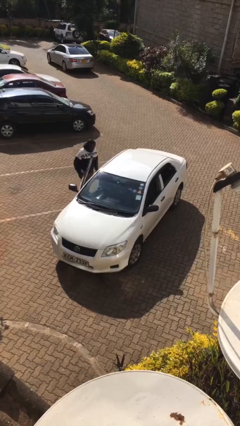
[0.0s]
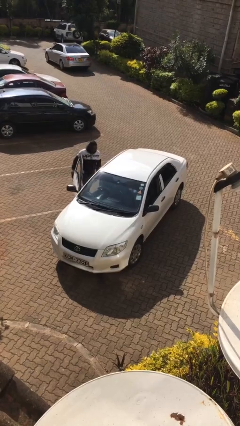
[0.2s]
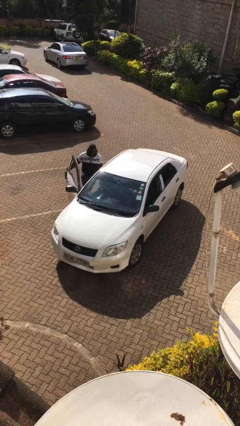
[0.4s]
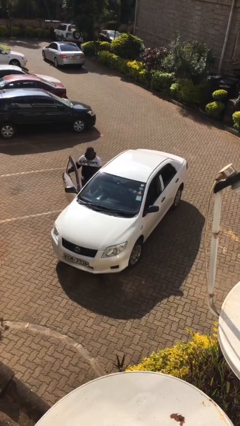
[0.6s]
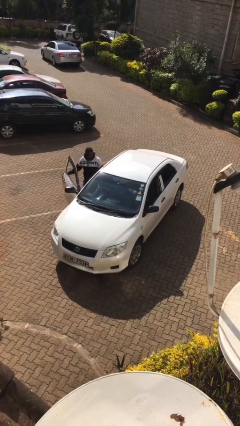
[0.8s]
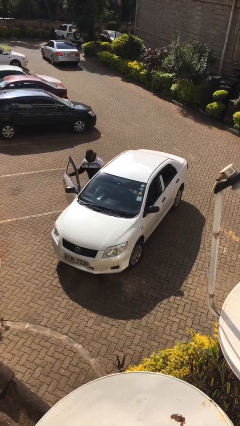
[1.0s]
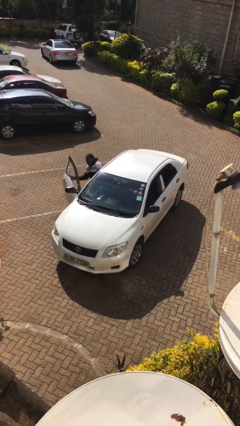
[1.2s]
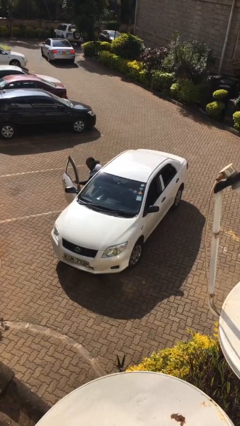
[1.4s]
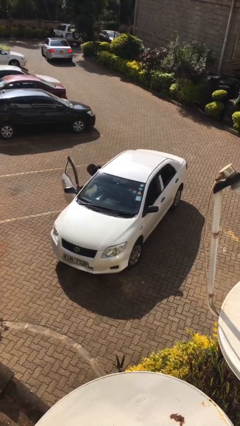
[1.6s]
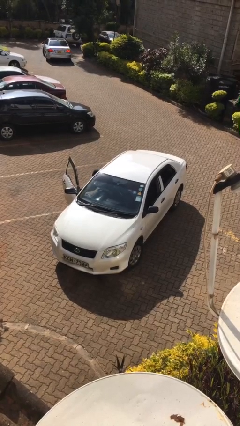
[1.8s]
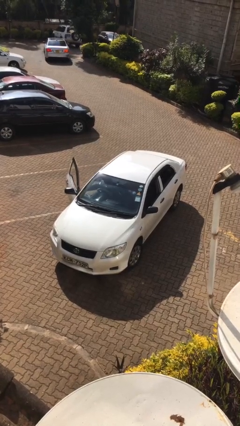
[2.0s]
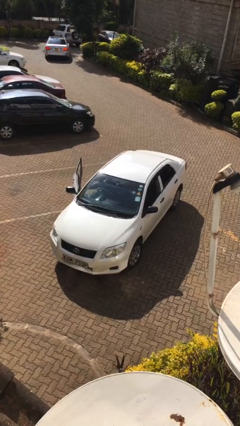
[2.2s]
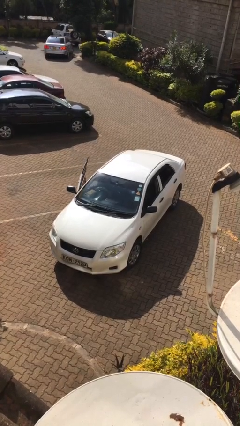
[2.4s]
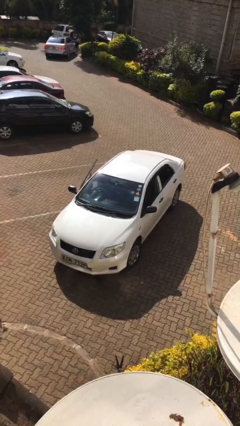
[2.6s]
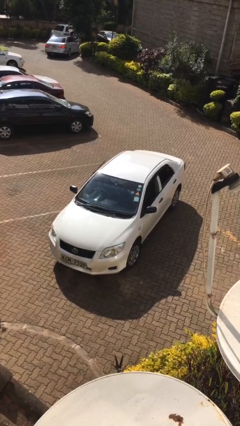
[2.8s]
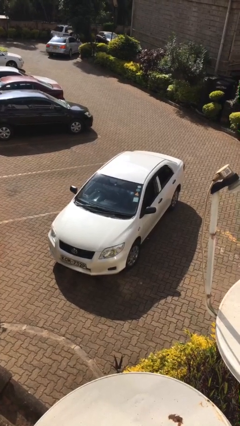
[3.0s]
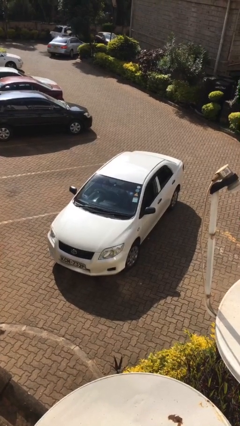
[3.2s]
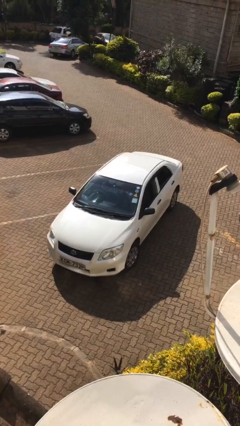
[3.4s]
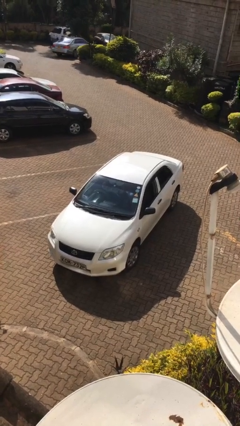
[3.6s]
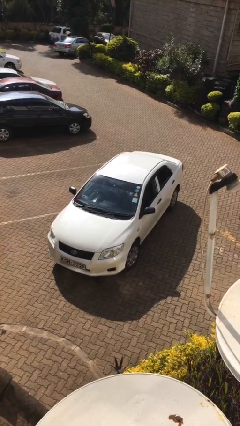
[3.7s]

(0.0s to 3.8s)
car picks up person

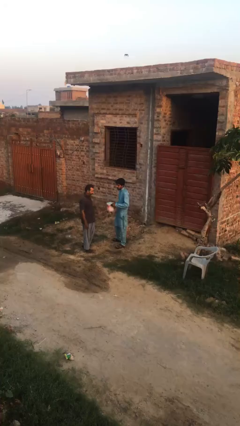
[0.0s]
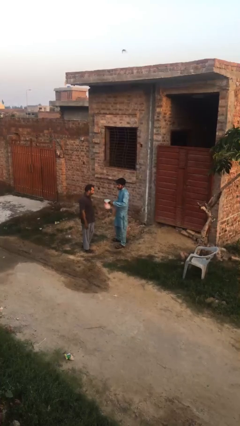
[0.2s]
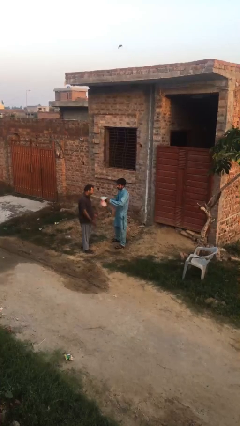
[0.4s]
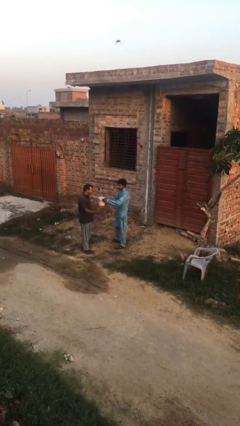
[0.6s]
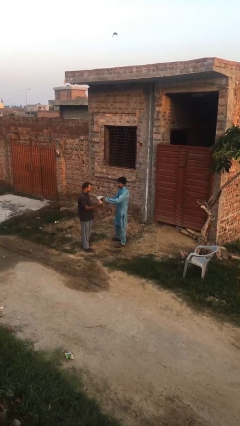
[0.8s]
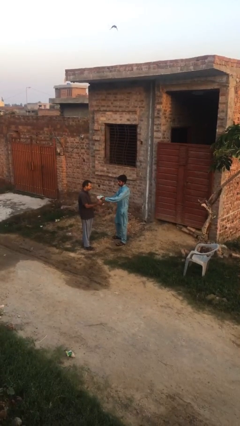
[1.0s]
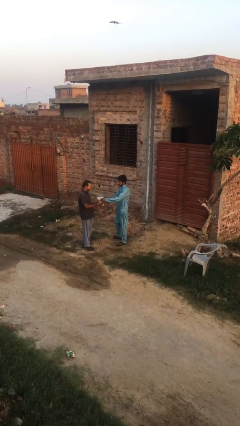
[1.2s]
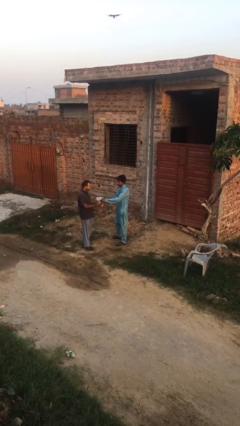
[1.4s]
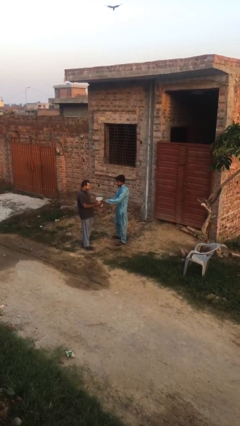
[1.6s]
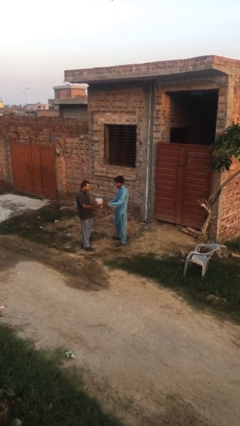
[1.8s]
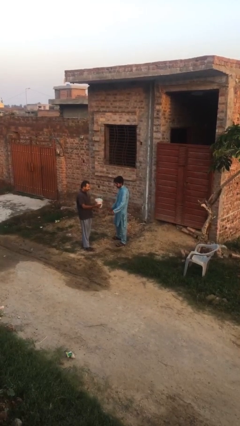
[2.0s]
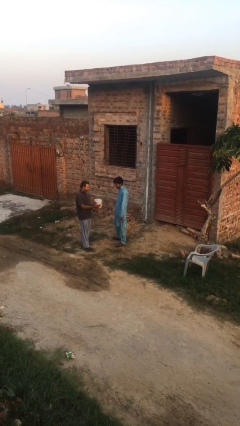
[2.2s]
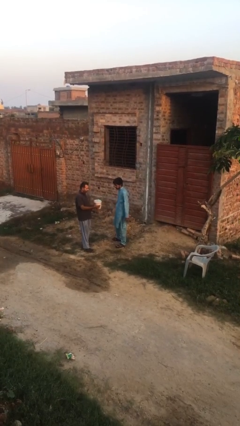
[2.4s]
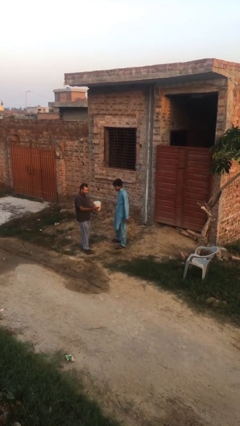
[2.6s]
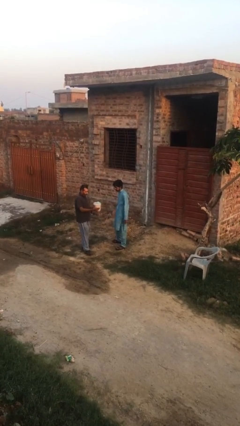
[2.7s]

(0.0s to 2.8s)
person transfers object to person

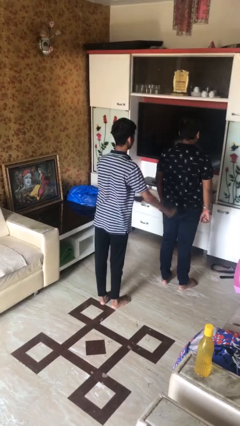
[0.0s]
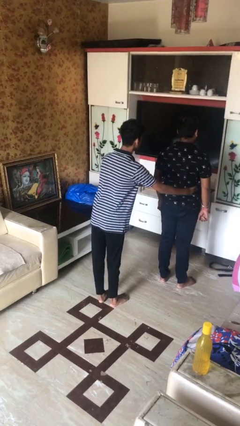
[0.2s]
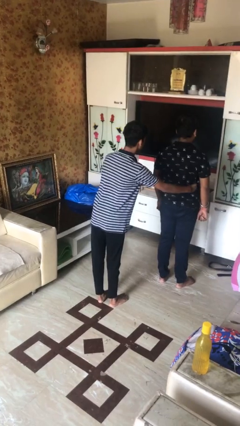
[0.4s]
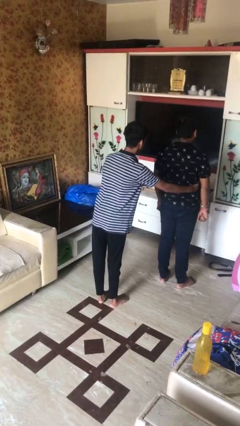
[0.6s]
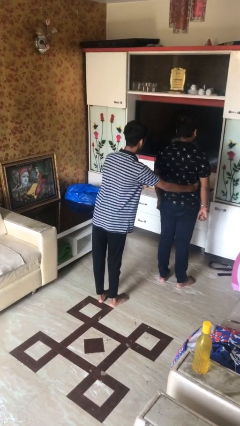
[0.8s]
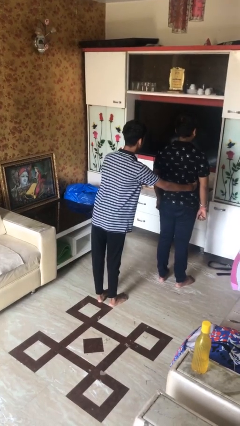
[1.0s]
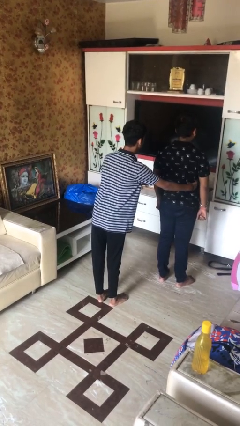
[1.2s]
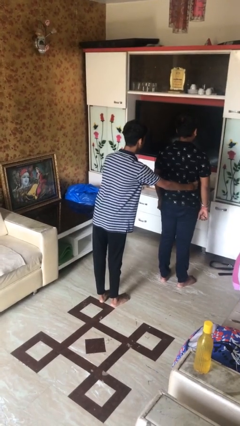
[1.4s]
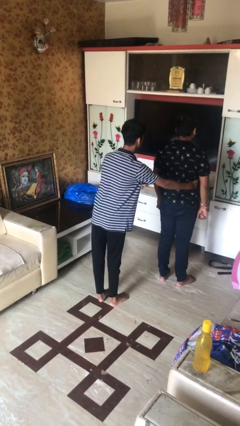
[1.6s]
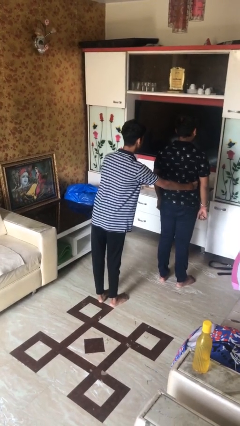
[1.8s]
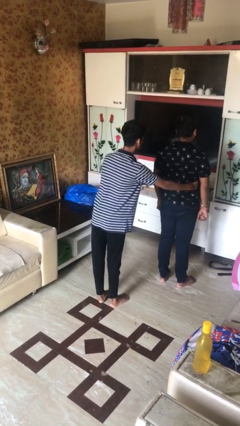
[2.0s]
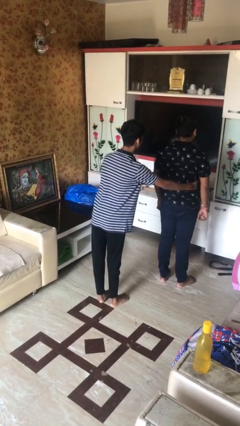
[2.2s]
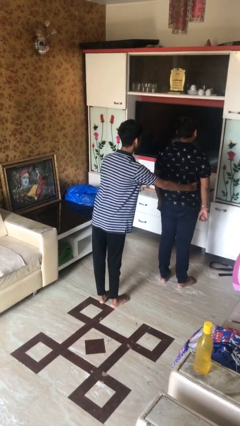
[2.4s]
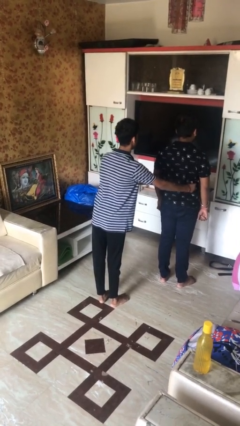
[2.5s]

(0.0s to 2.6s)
person tickles person

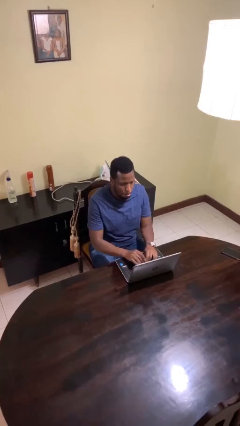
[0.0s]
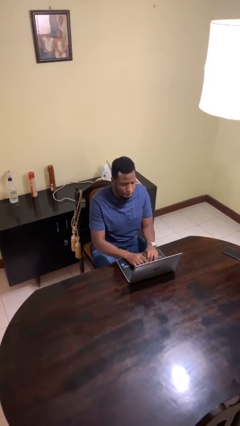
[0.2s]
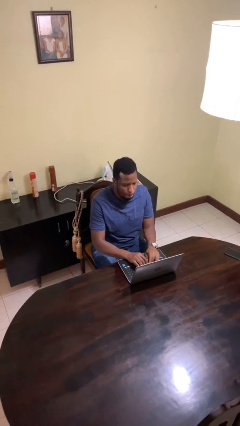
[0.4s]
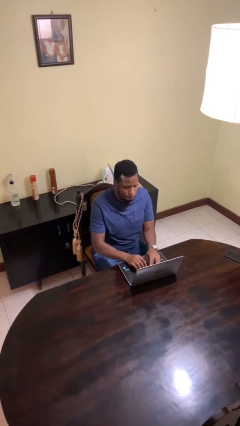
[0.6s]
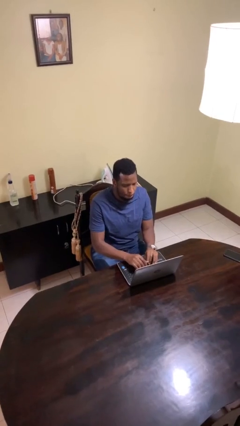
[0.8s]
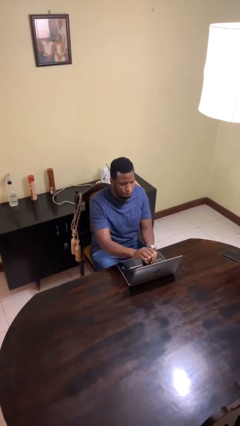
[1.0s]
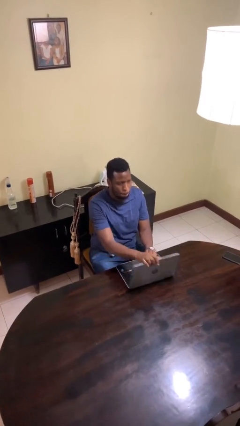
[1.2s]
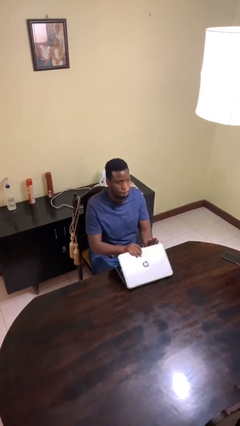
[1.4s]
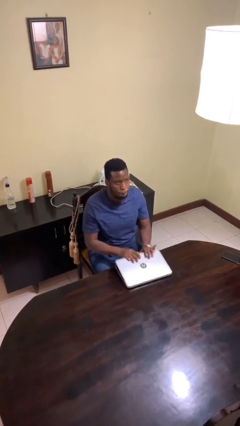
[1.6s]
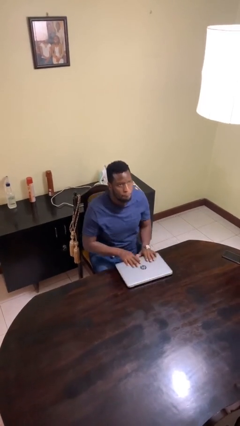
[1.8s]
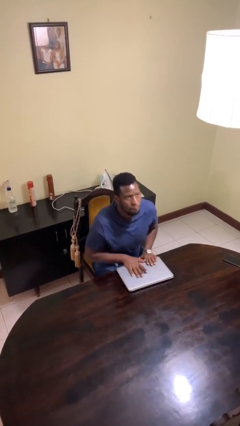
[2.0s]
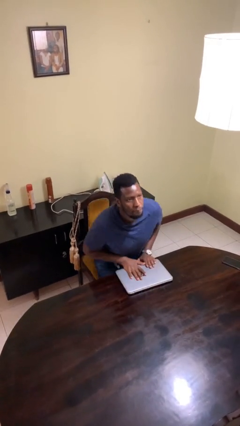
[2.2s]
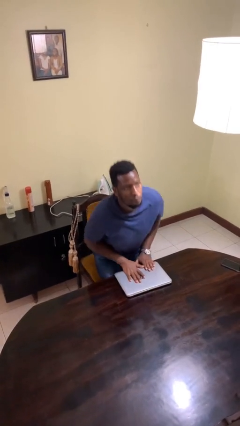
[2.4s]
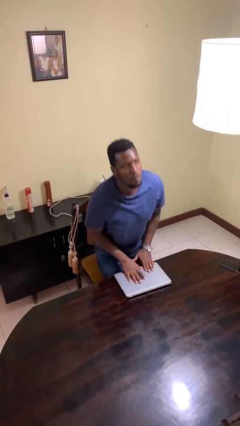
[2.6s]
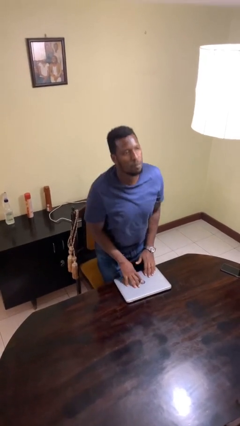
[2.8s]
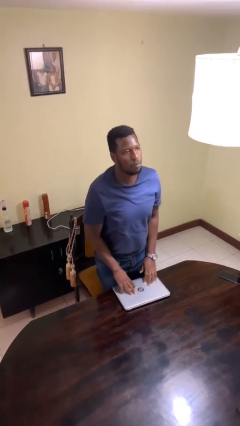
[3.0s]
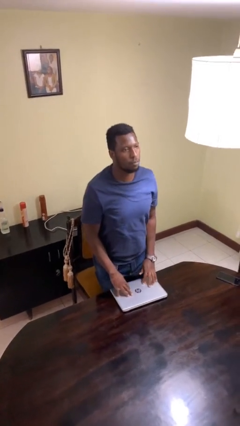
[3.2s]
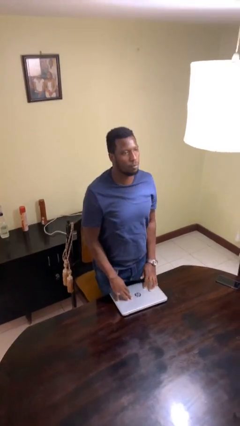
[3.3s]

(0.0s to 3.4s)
person stands up

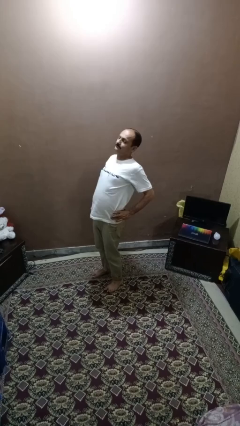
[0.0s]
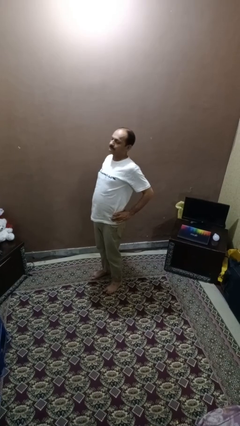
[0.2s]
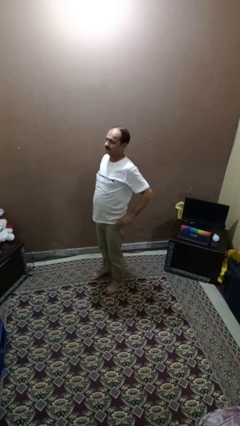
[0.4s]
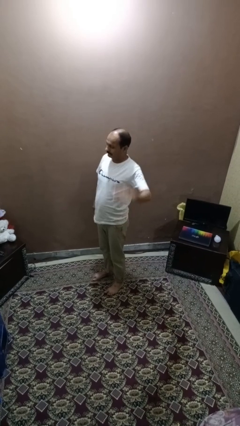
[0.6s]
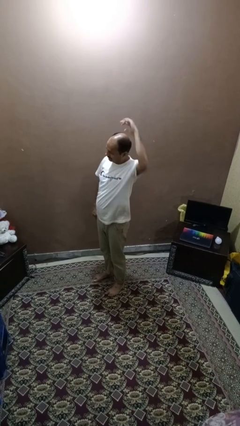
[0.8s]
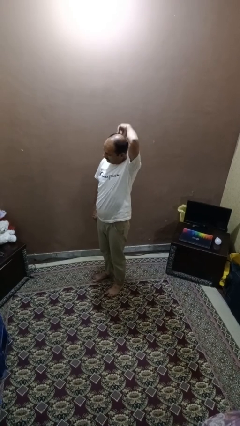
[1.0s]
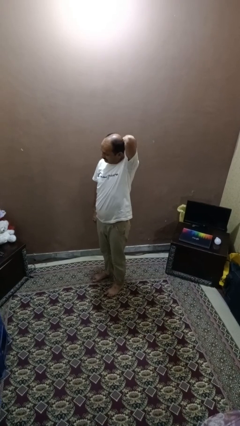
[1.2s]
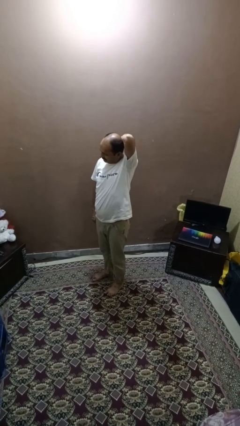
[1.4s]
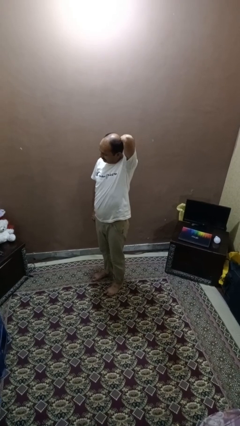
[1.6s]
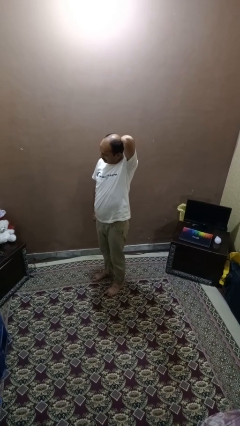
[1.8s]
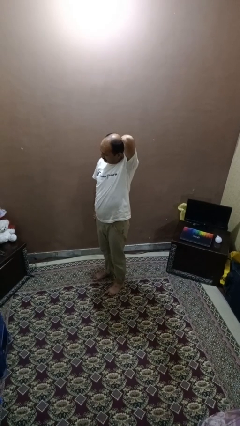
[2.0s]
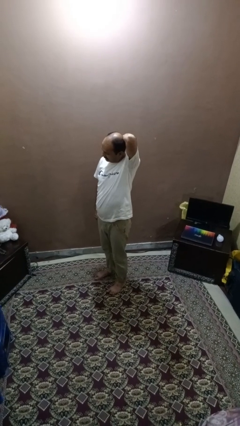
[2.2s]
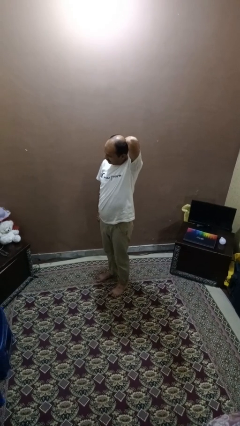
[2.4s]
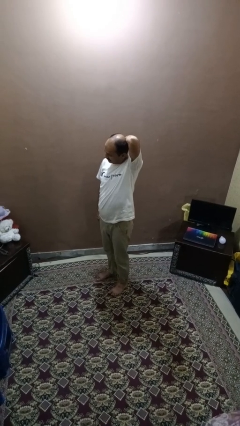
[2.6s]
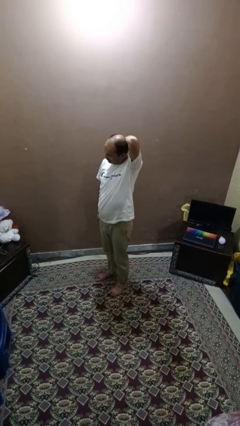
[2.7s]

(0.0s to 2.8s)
person stretches arms to side

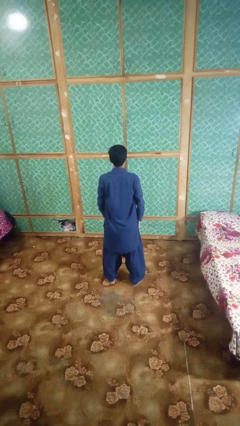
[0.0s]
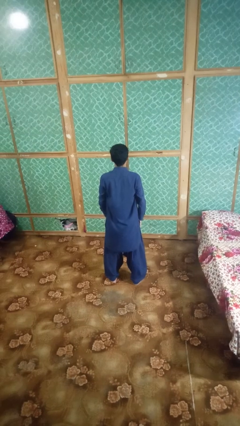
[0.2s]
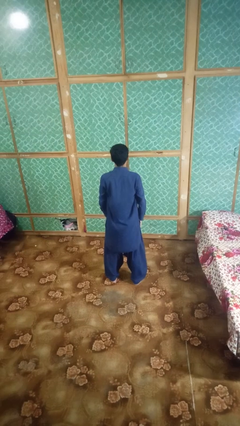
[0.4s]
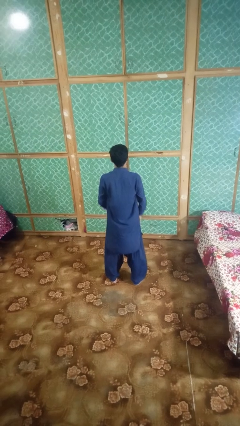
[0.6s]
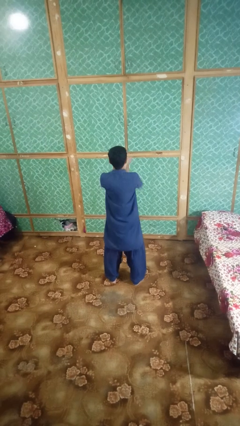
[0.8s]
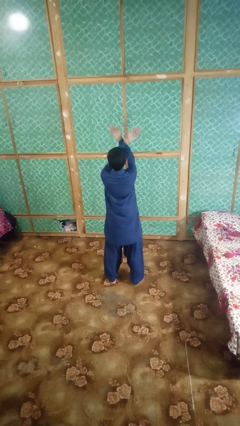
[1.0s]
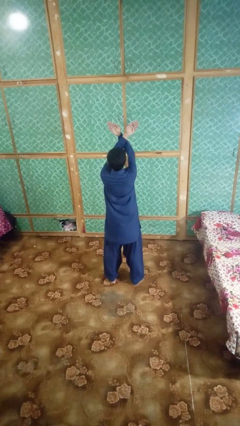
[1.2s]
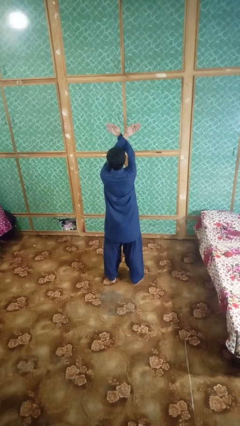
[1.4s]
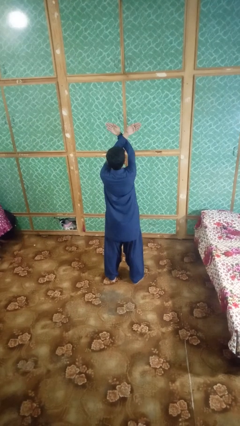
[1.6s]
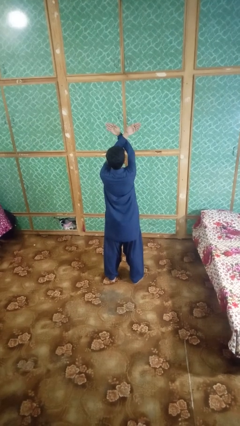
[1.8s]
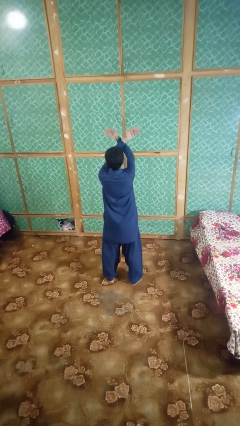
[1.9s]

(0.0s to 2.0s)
person gestures arms x
